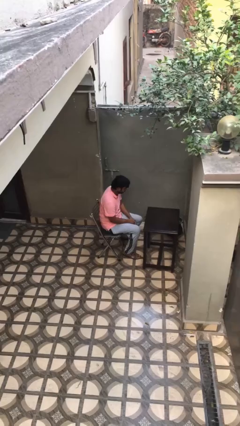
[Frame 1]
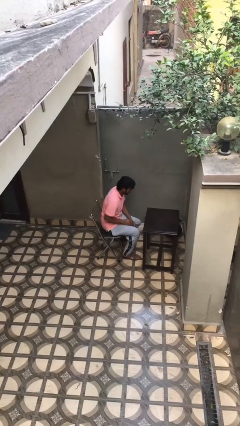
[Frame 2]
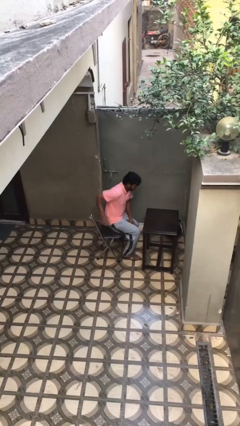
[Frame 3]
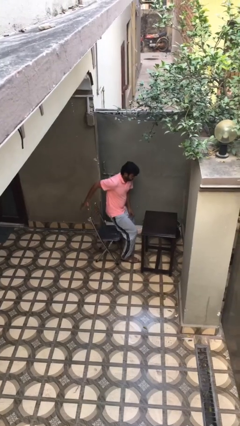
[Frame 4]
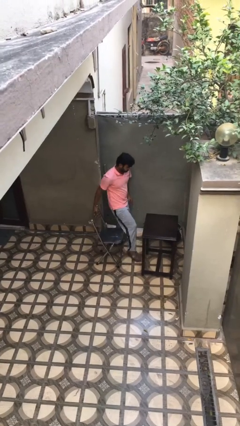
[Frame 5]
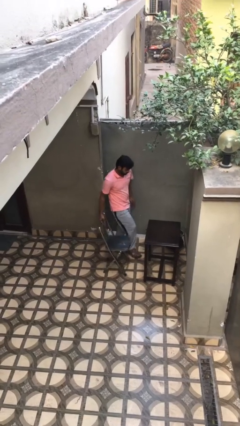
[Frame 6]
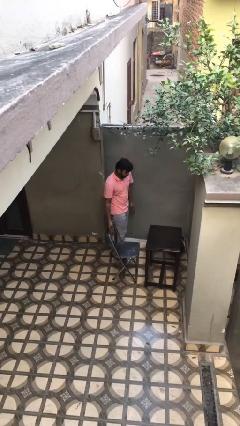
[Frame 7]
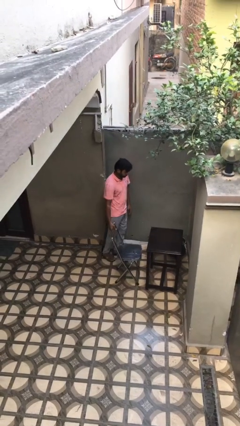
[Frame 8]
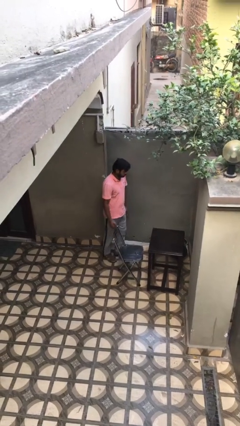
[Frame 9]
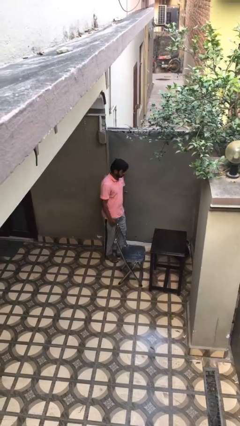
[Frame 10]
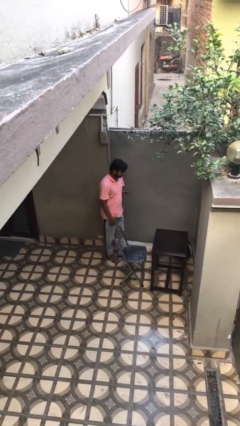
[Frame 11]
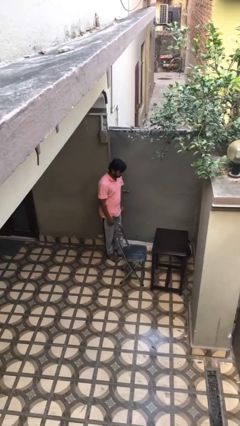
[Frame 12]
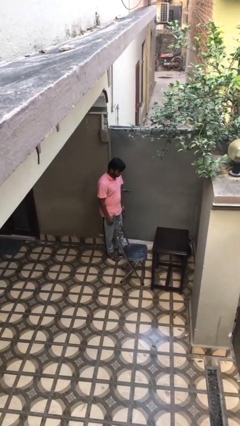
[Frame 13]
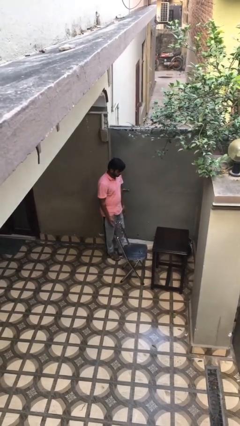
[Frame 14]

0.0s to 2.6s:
person stands up

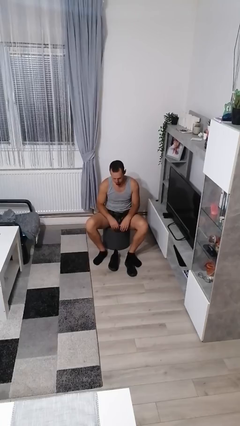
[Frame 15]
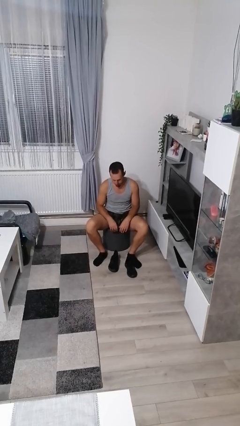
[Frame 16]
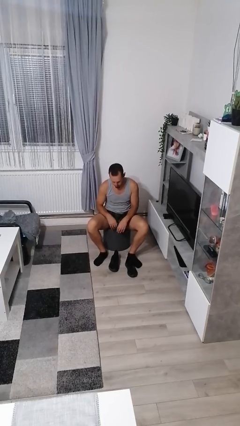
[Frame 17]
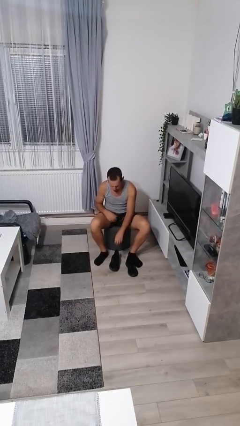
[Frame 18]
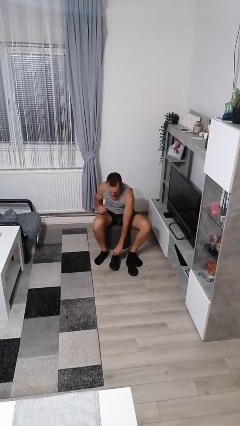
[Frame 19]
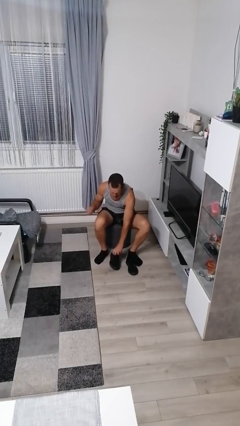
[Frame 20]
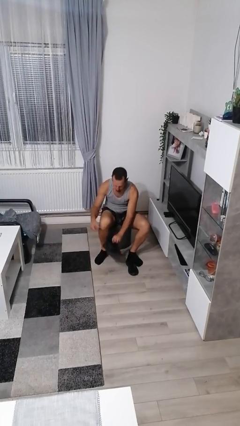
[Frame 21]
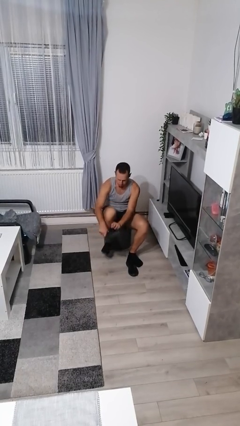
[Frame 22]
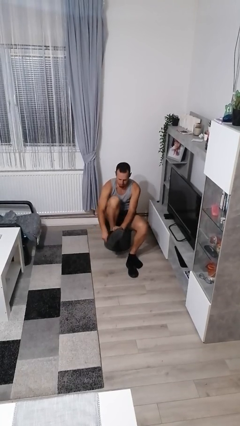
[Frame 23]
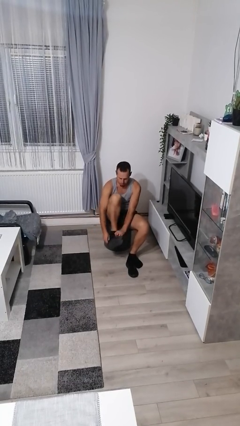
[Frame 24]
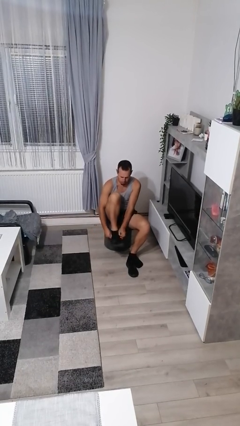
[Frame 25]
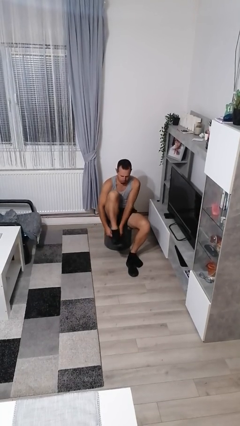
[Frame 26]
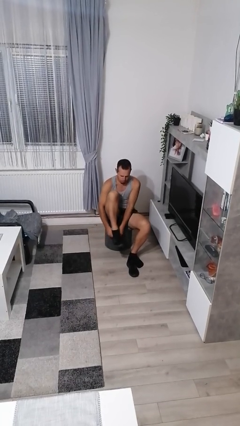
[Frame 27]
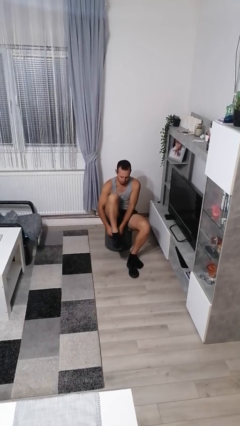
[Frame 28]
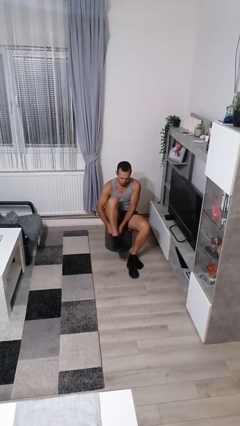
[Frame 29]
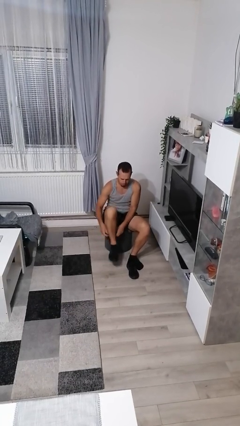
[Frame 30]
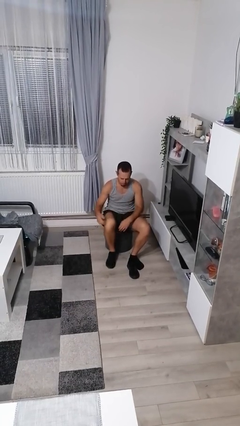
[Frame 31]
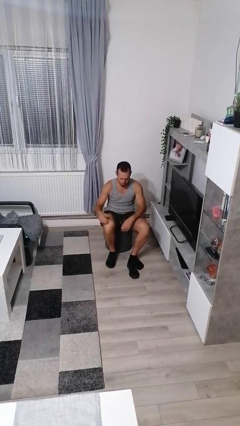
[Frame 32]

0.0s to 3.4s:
person puts on shoes

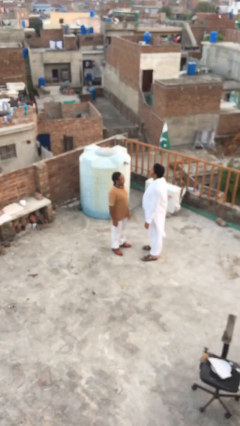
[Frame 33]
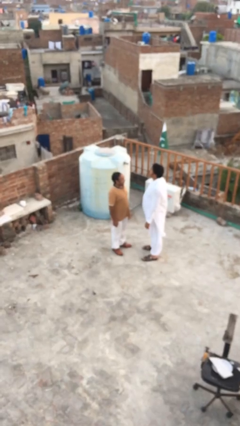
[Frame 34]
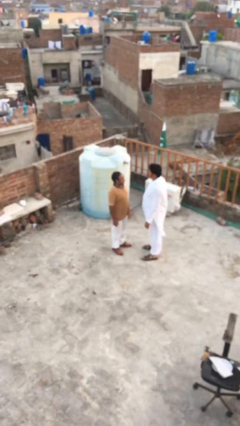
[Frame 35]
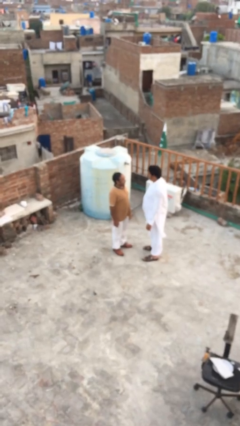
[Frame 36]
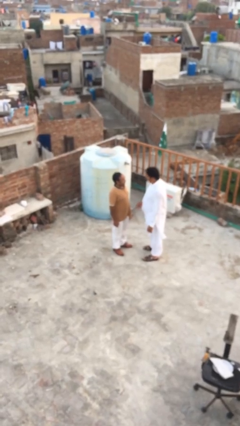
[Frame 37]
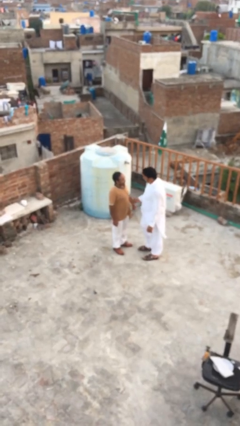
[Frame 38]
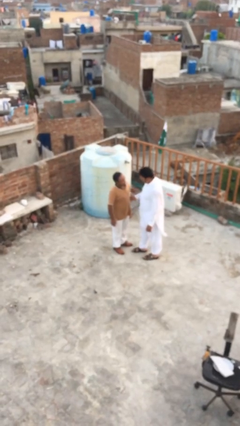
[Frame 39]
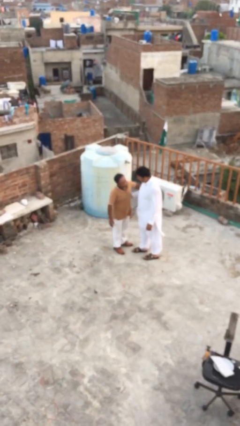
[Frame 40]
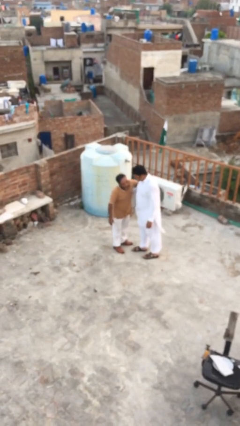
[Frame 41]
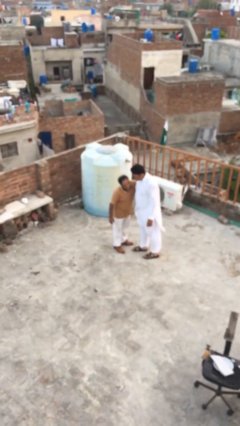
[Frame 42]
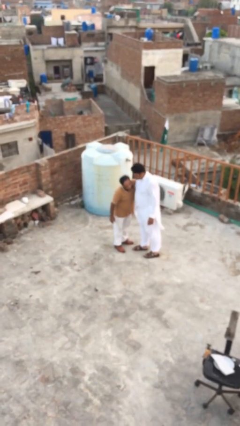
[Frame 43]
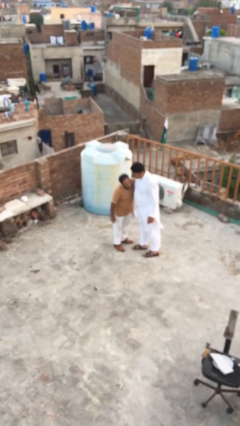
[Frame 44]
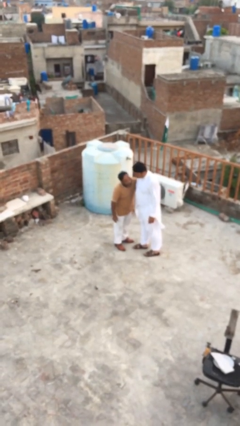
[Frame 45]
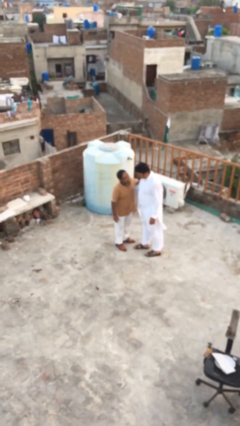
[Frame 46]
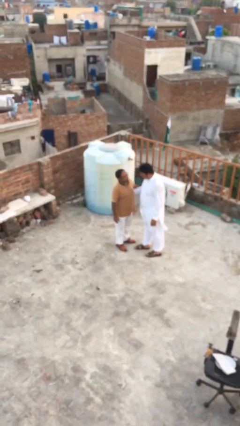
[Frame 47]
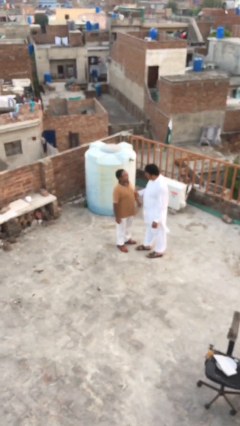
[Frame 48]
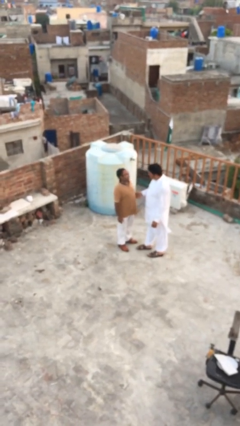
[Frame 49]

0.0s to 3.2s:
person embraces person

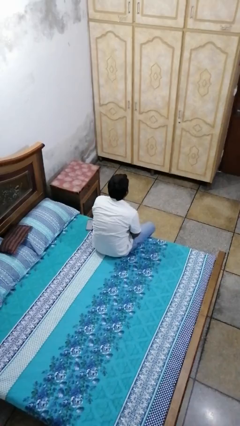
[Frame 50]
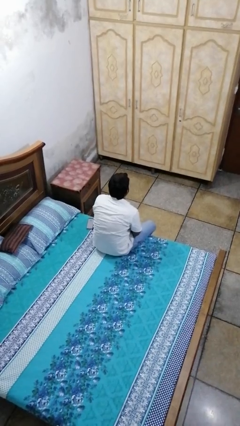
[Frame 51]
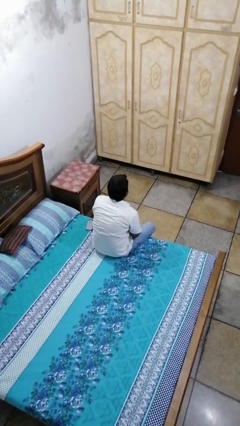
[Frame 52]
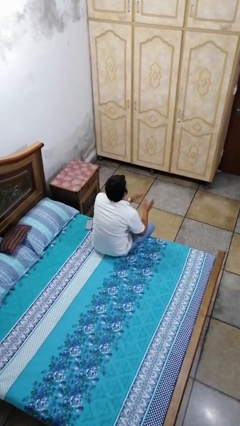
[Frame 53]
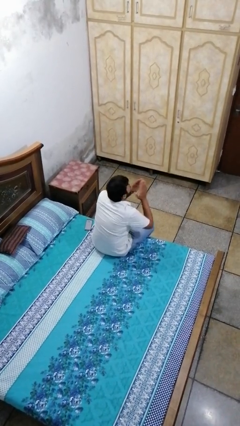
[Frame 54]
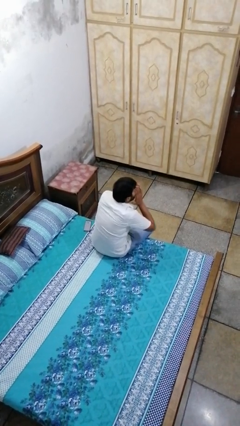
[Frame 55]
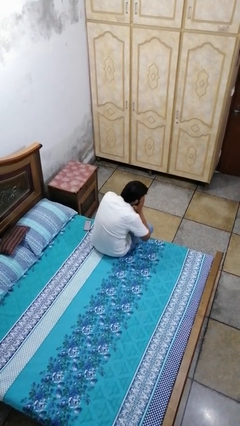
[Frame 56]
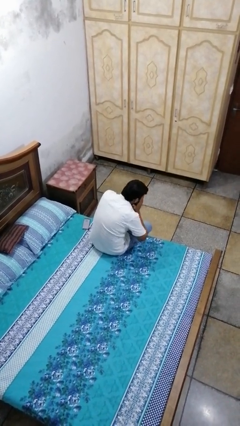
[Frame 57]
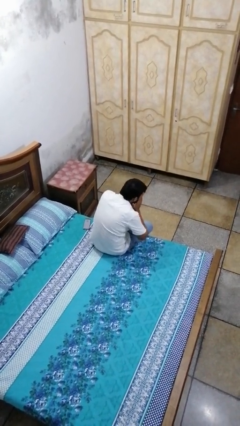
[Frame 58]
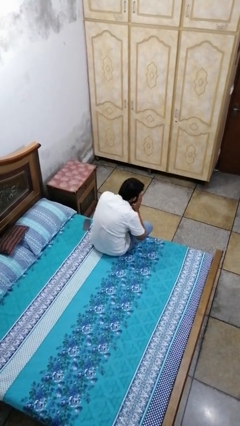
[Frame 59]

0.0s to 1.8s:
person sneezes into hand

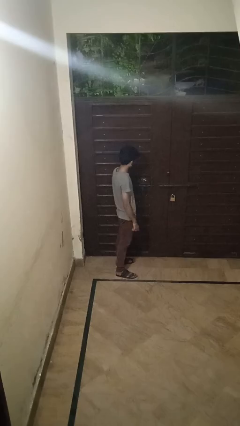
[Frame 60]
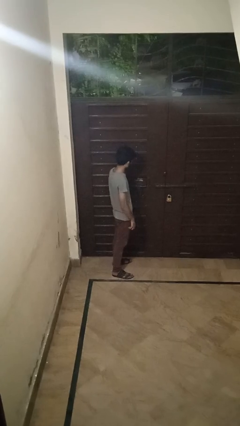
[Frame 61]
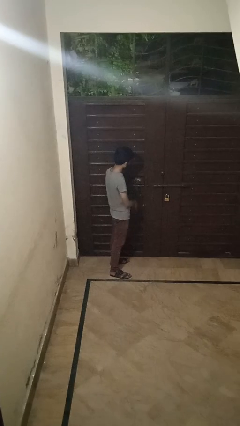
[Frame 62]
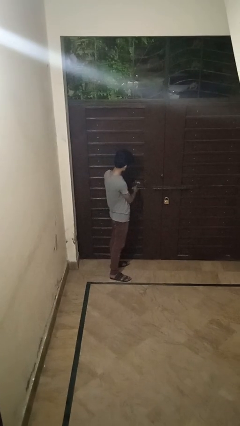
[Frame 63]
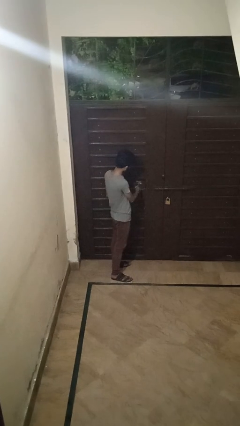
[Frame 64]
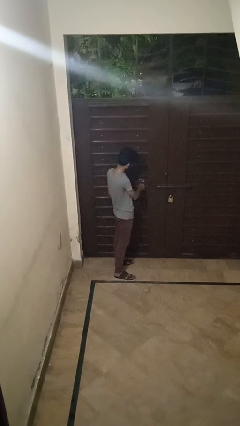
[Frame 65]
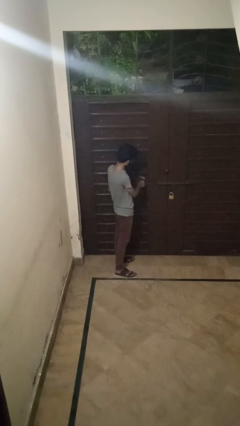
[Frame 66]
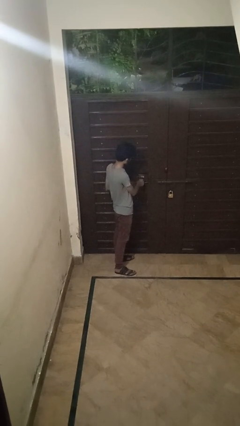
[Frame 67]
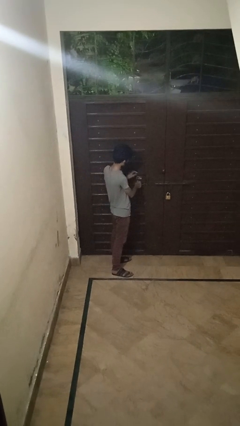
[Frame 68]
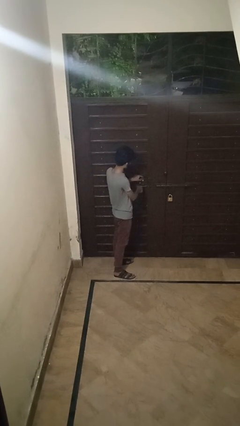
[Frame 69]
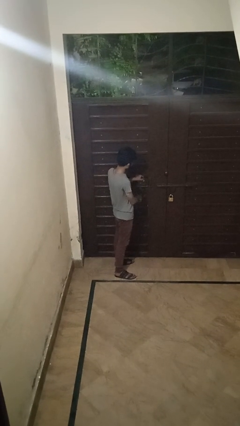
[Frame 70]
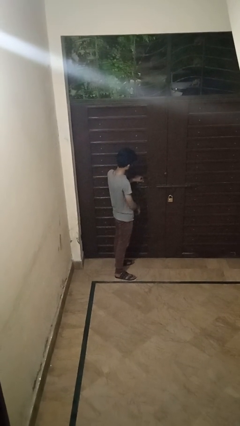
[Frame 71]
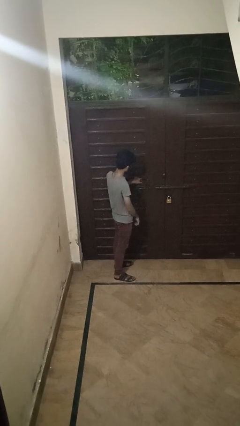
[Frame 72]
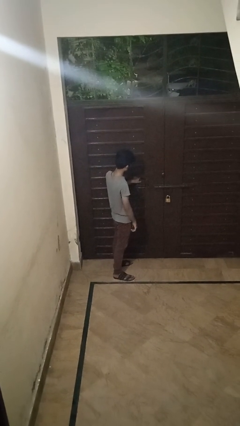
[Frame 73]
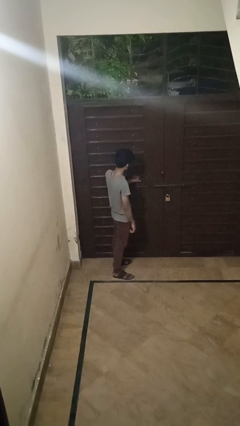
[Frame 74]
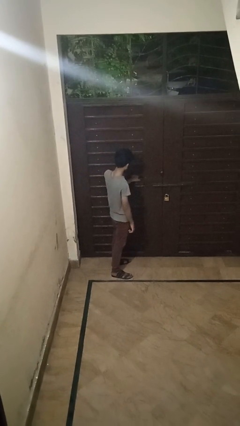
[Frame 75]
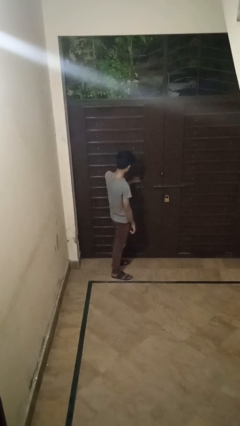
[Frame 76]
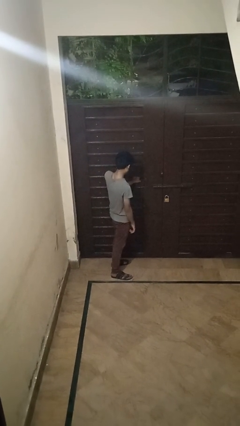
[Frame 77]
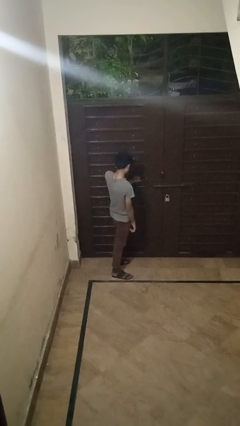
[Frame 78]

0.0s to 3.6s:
person unlocks door with keys

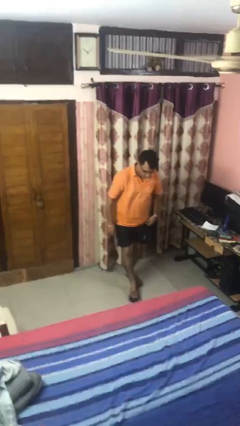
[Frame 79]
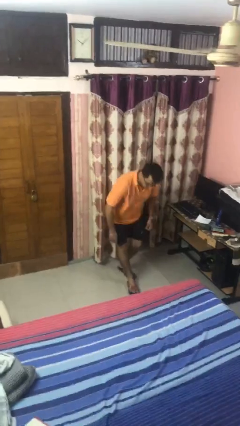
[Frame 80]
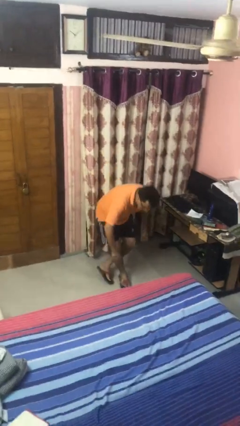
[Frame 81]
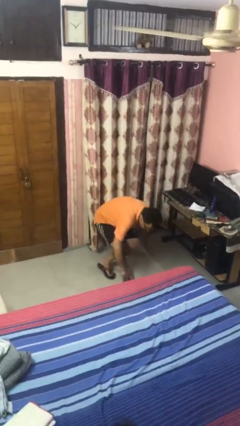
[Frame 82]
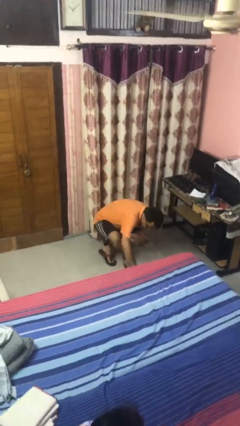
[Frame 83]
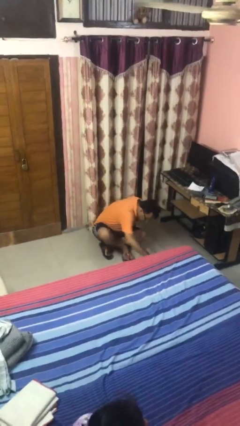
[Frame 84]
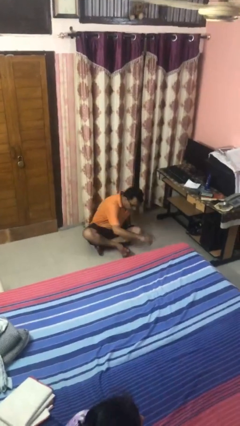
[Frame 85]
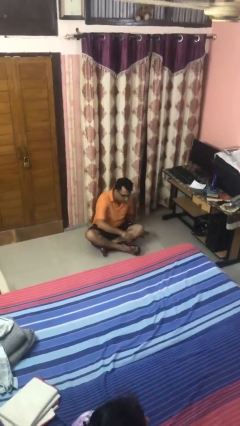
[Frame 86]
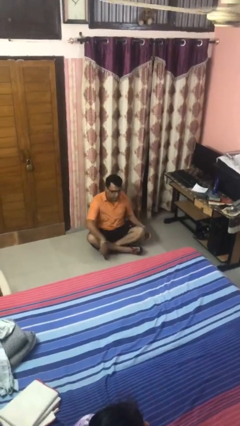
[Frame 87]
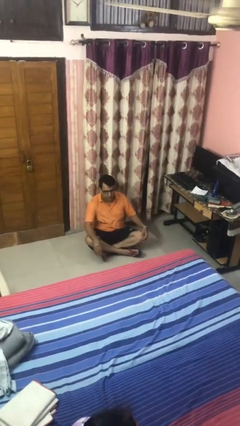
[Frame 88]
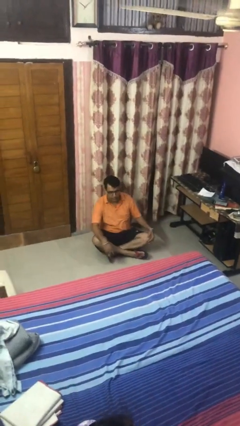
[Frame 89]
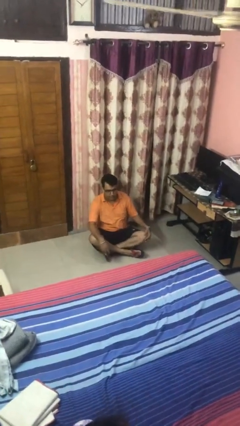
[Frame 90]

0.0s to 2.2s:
person sits crisscross

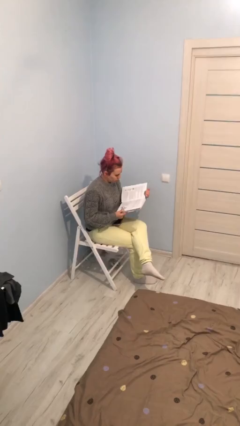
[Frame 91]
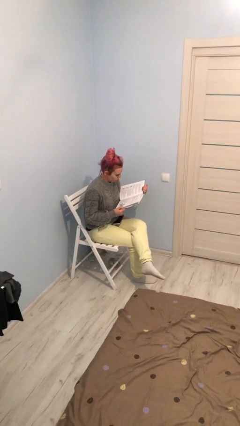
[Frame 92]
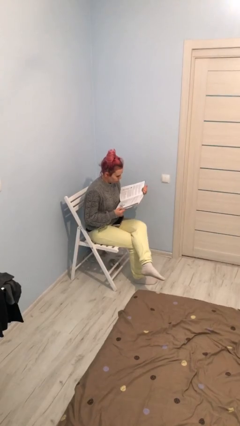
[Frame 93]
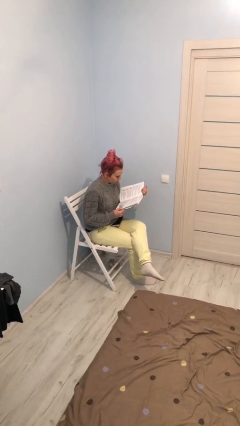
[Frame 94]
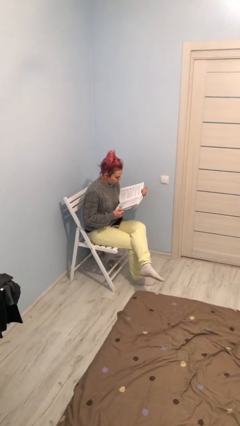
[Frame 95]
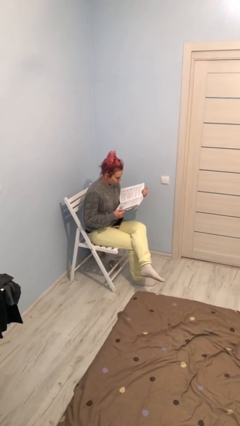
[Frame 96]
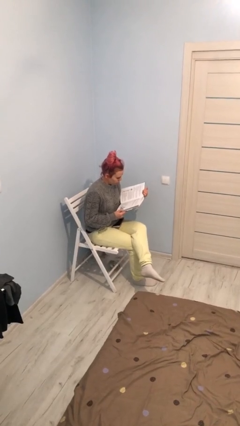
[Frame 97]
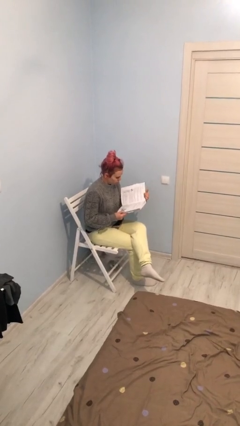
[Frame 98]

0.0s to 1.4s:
person reads document
